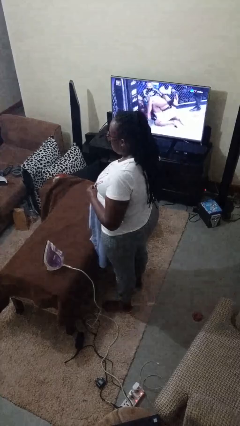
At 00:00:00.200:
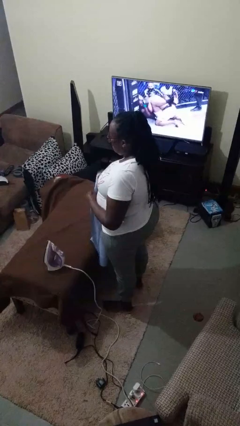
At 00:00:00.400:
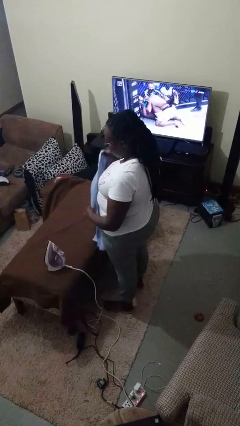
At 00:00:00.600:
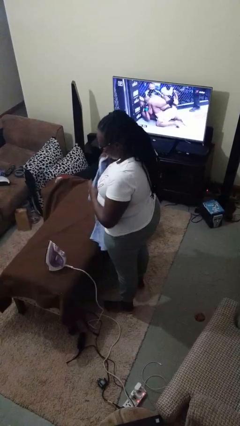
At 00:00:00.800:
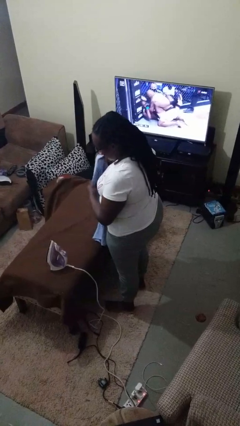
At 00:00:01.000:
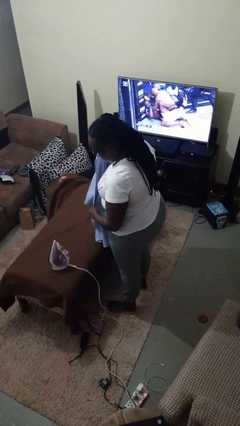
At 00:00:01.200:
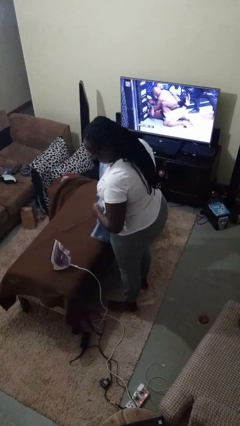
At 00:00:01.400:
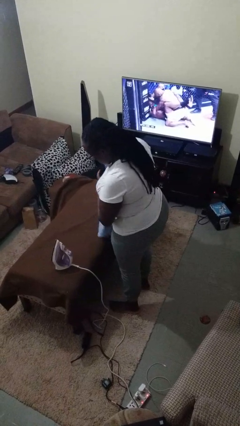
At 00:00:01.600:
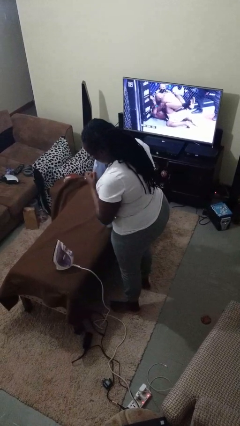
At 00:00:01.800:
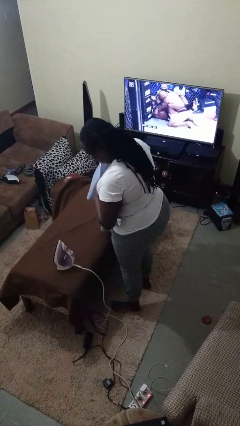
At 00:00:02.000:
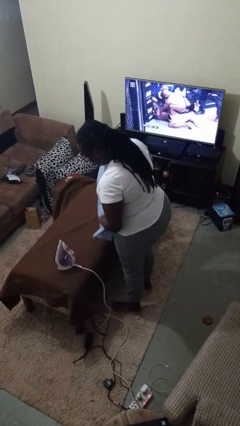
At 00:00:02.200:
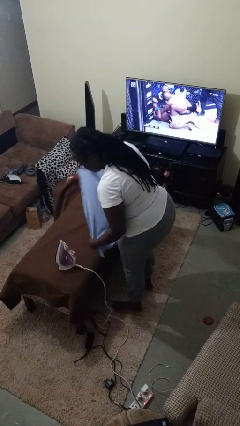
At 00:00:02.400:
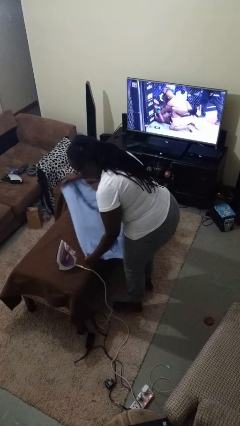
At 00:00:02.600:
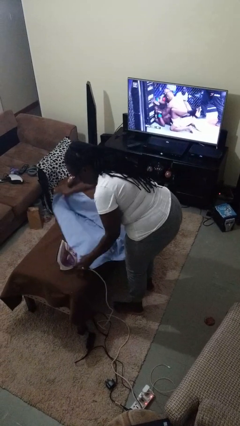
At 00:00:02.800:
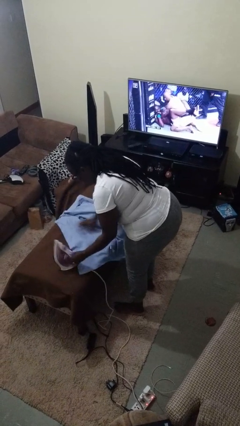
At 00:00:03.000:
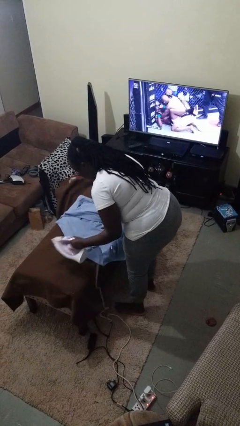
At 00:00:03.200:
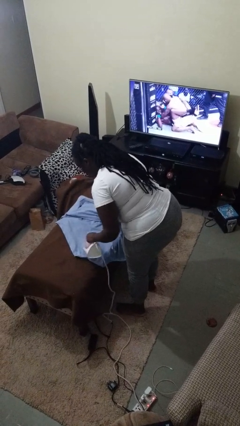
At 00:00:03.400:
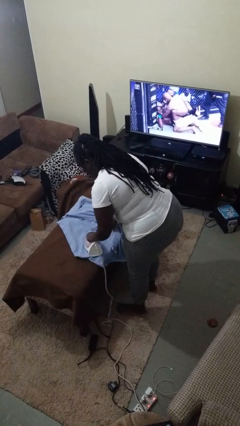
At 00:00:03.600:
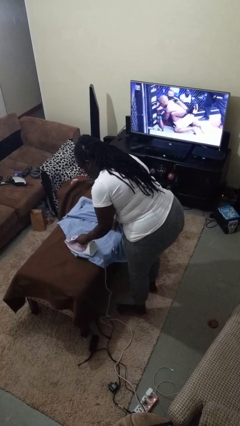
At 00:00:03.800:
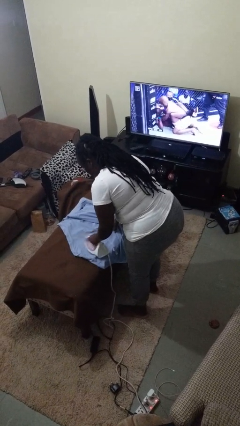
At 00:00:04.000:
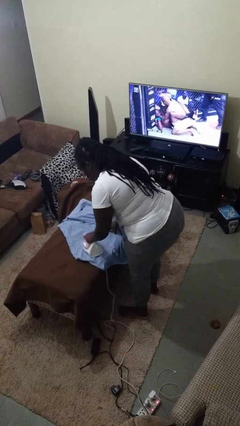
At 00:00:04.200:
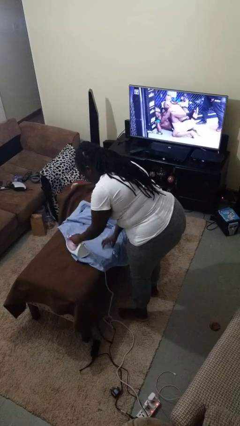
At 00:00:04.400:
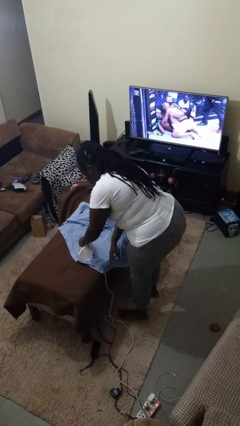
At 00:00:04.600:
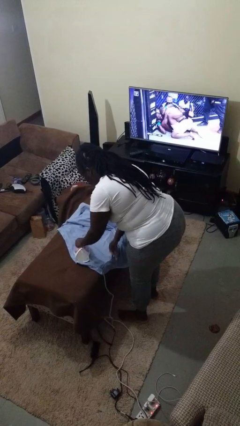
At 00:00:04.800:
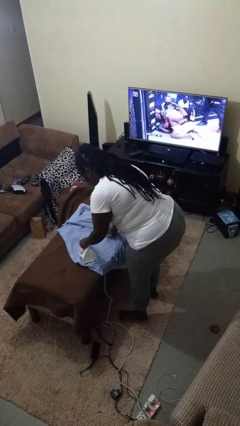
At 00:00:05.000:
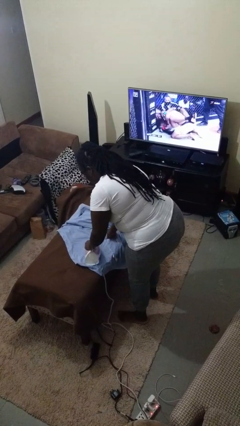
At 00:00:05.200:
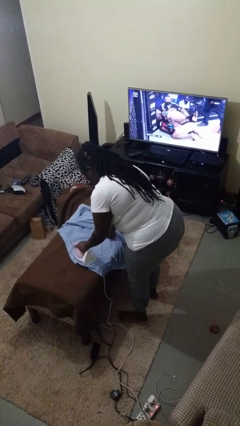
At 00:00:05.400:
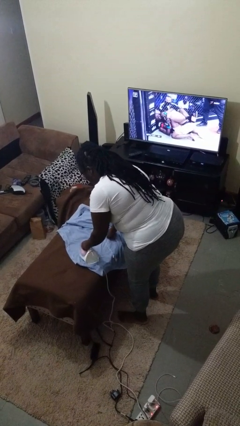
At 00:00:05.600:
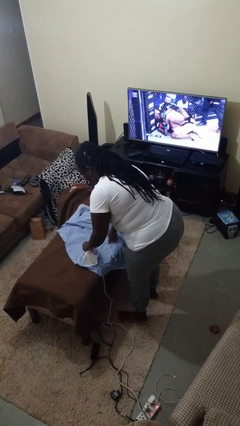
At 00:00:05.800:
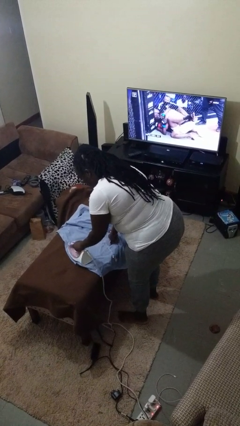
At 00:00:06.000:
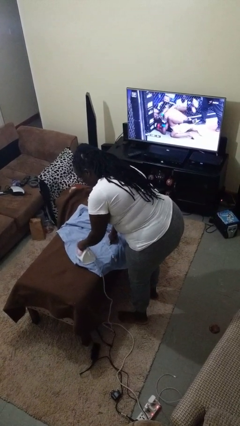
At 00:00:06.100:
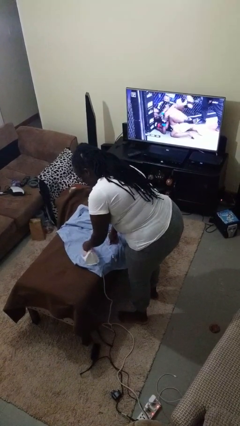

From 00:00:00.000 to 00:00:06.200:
person irons clothes

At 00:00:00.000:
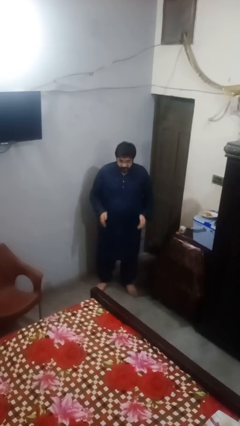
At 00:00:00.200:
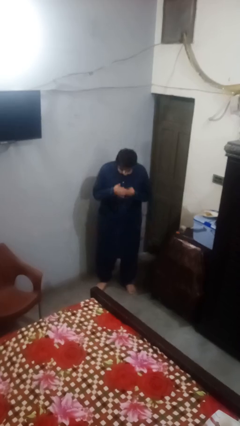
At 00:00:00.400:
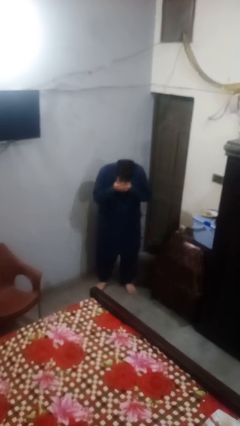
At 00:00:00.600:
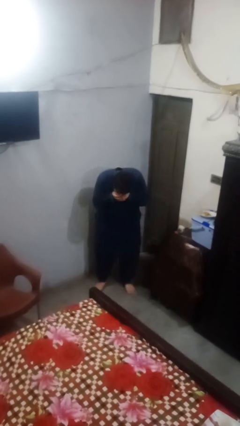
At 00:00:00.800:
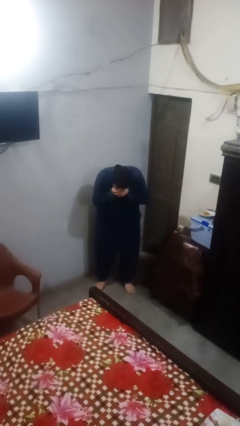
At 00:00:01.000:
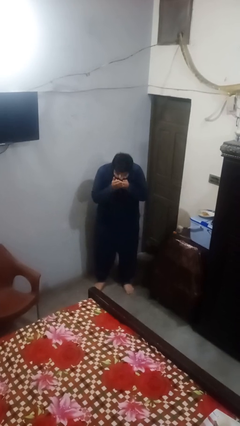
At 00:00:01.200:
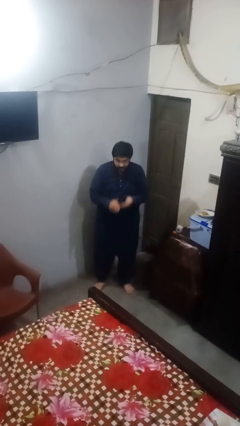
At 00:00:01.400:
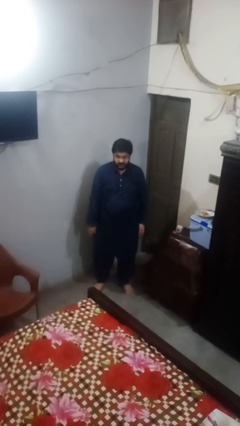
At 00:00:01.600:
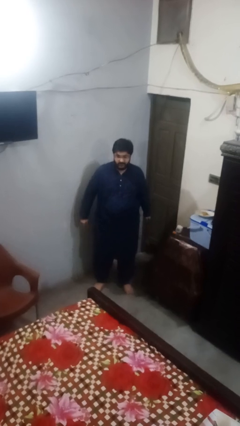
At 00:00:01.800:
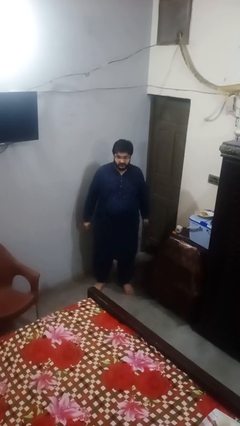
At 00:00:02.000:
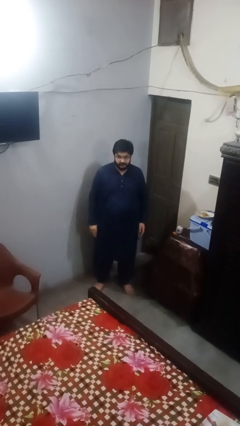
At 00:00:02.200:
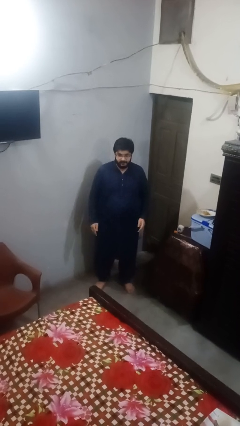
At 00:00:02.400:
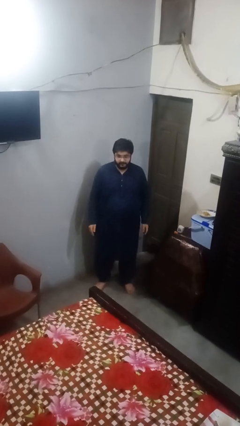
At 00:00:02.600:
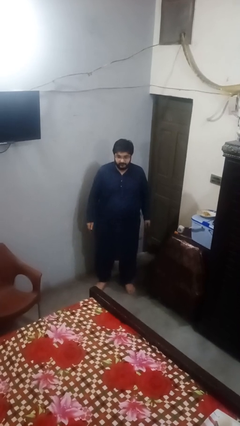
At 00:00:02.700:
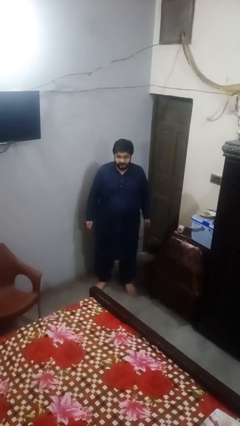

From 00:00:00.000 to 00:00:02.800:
person sneezes into hand

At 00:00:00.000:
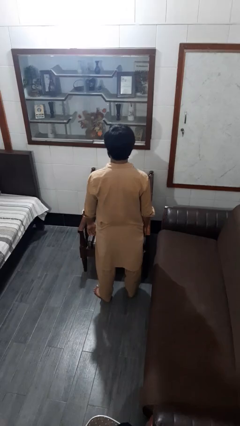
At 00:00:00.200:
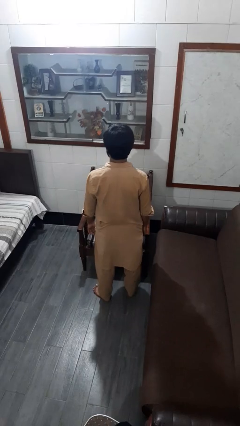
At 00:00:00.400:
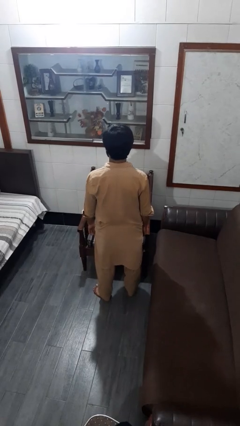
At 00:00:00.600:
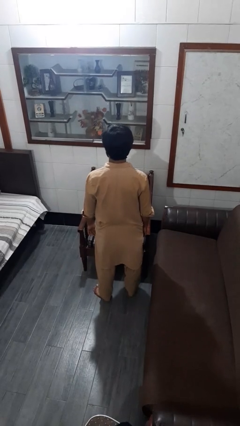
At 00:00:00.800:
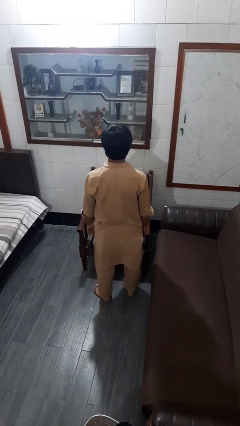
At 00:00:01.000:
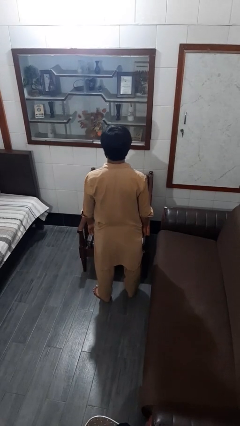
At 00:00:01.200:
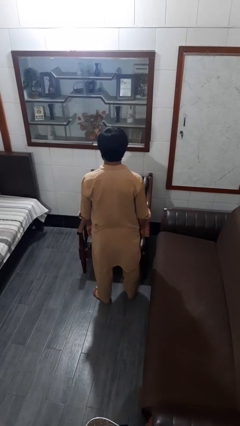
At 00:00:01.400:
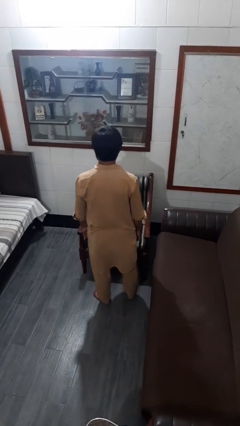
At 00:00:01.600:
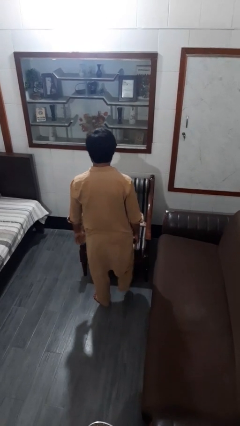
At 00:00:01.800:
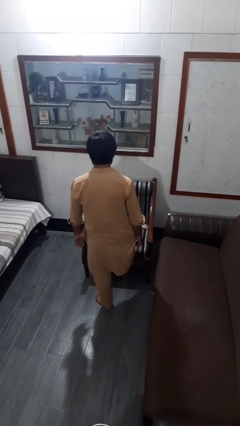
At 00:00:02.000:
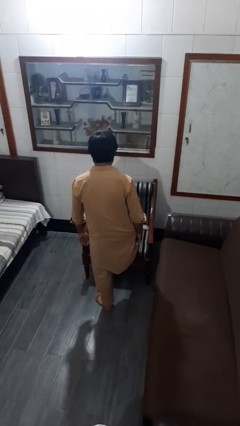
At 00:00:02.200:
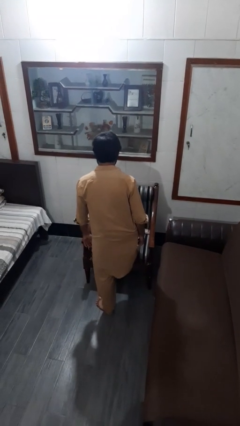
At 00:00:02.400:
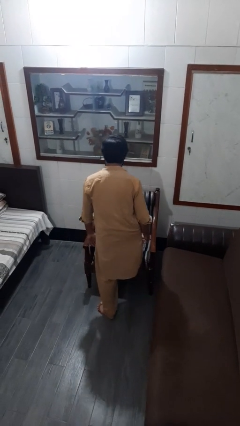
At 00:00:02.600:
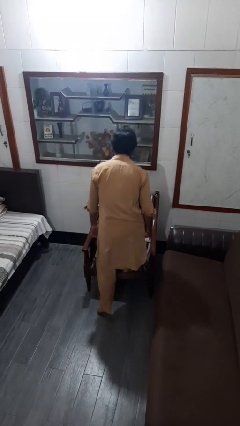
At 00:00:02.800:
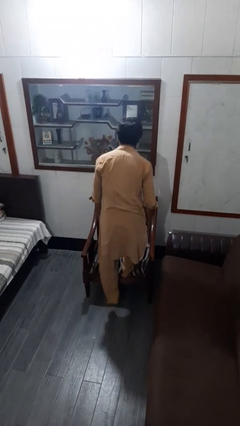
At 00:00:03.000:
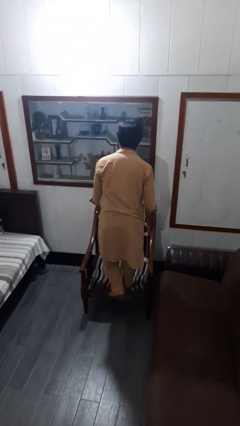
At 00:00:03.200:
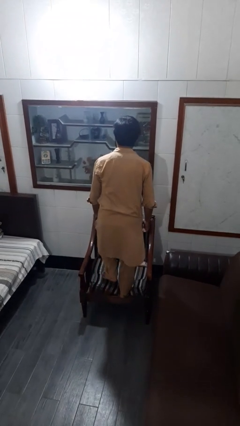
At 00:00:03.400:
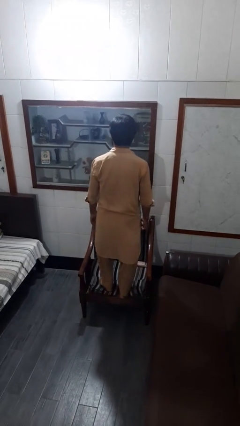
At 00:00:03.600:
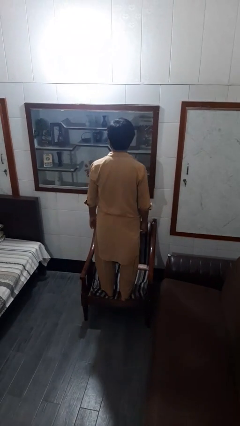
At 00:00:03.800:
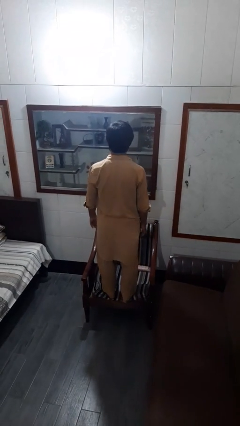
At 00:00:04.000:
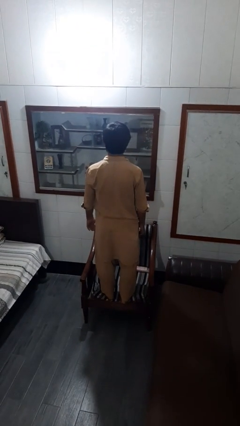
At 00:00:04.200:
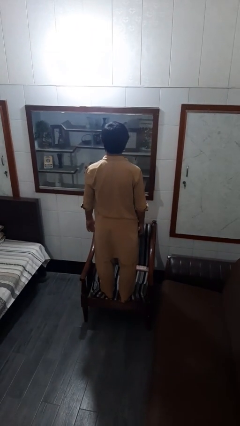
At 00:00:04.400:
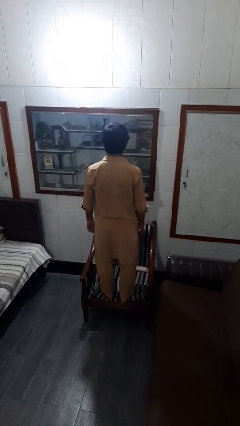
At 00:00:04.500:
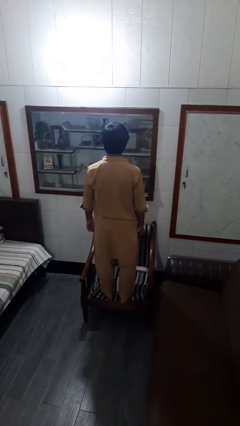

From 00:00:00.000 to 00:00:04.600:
person climbs on chair

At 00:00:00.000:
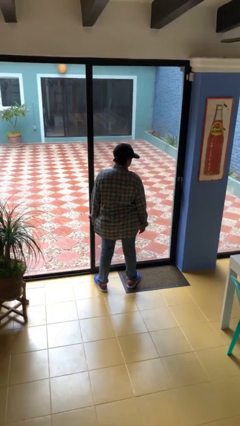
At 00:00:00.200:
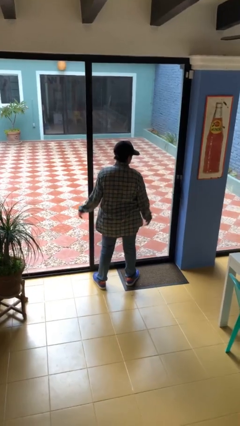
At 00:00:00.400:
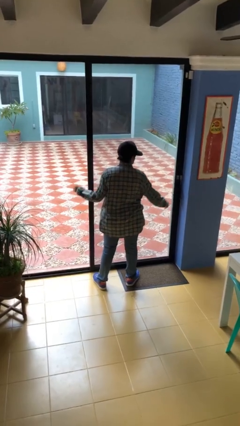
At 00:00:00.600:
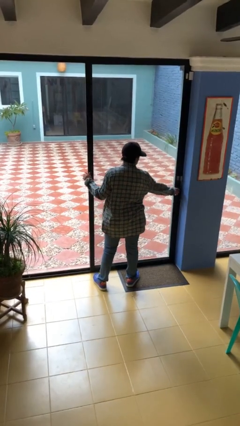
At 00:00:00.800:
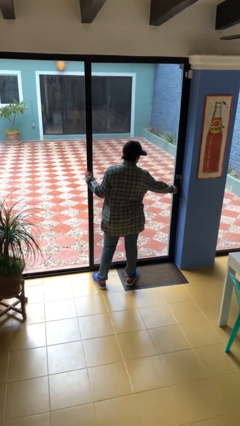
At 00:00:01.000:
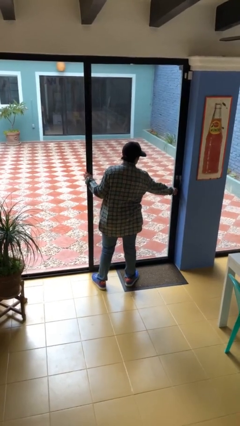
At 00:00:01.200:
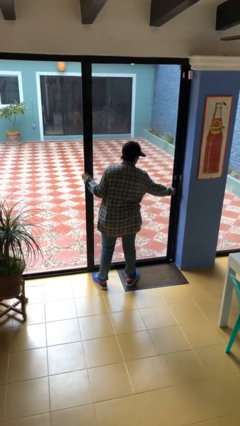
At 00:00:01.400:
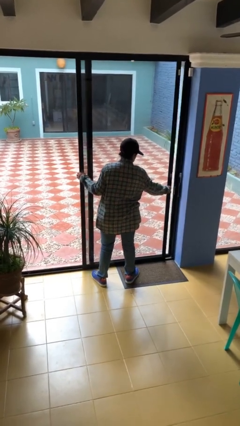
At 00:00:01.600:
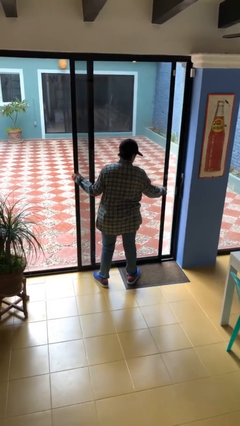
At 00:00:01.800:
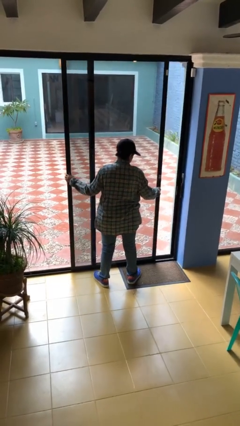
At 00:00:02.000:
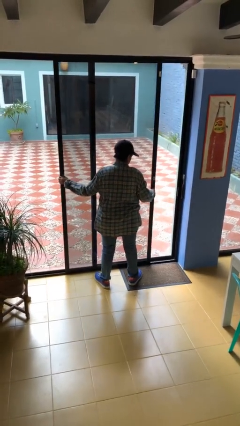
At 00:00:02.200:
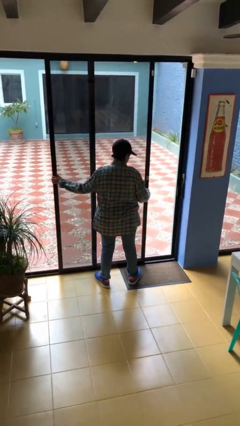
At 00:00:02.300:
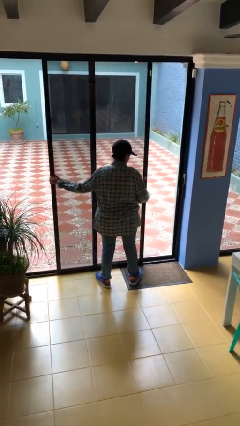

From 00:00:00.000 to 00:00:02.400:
person opens sliding door

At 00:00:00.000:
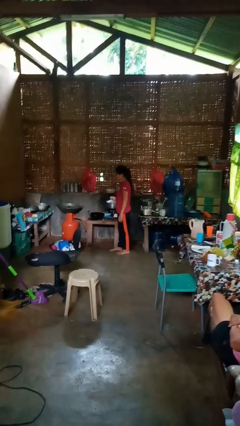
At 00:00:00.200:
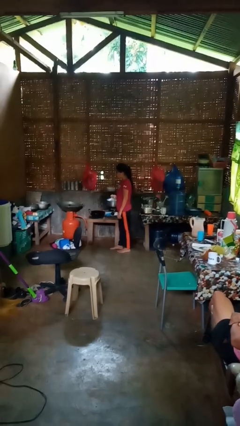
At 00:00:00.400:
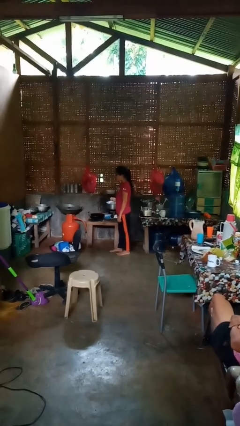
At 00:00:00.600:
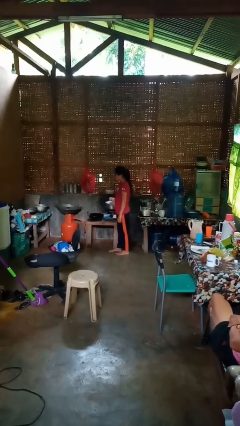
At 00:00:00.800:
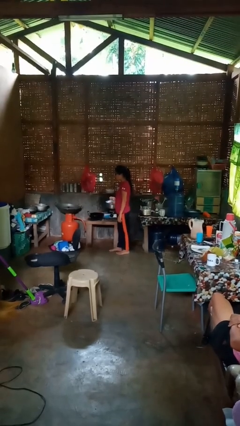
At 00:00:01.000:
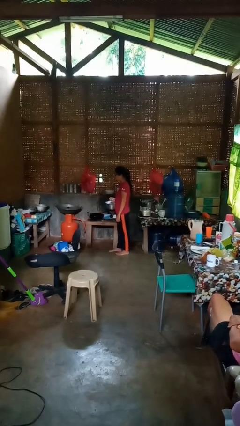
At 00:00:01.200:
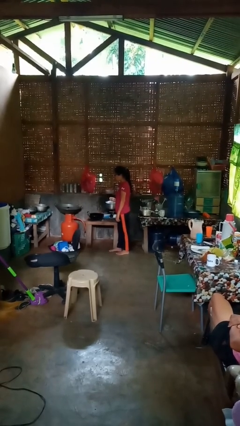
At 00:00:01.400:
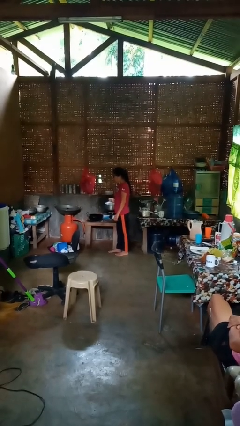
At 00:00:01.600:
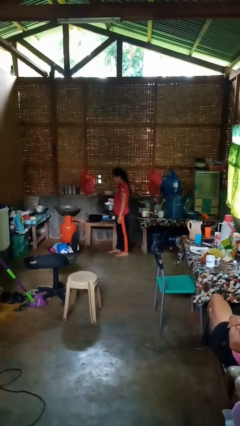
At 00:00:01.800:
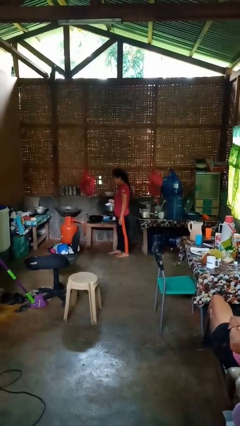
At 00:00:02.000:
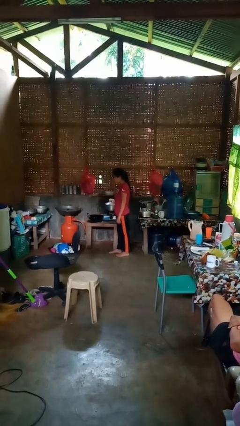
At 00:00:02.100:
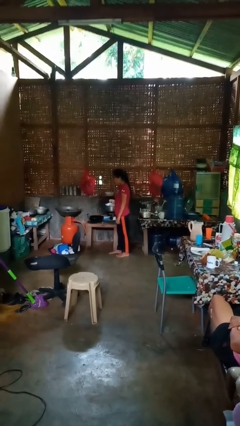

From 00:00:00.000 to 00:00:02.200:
person burns hand
